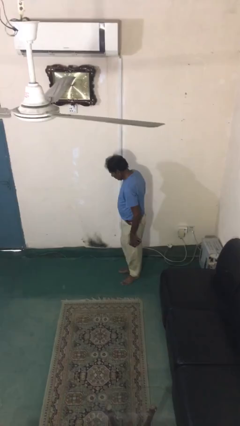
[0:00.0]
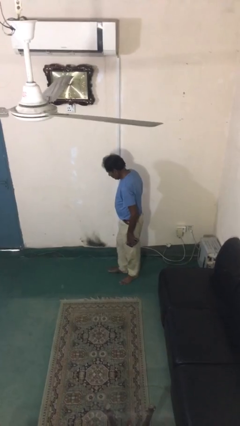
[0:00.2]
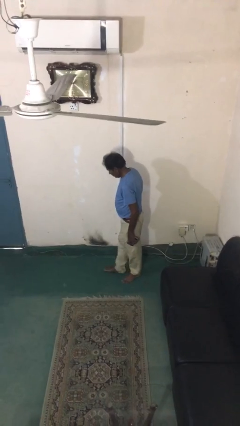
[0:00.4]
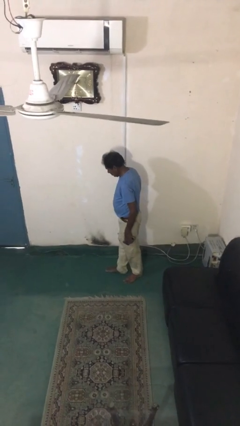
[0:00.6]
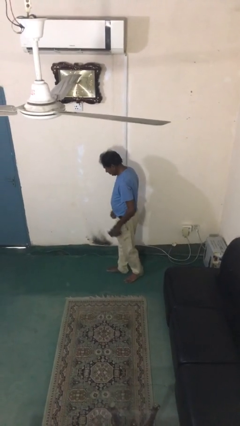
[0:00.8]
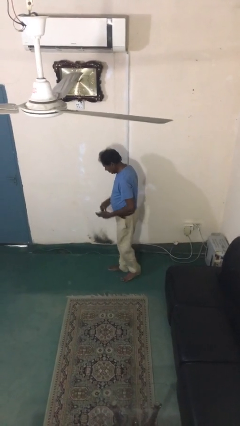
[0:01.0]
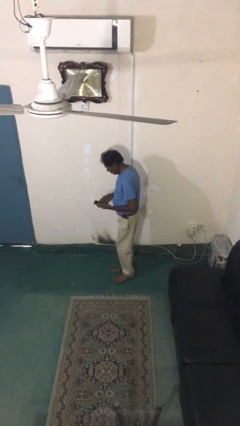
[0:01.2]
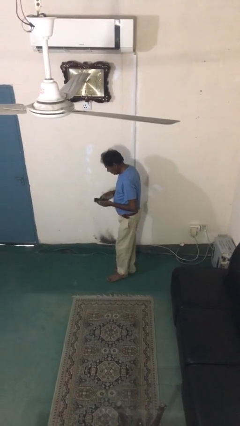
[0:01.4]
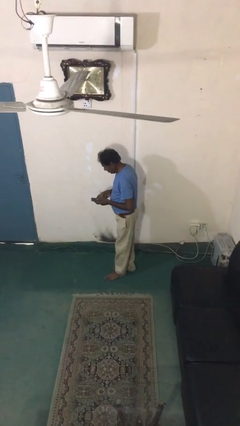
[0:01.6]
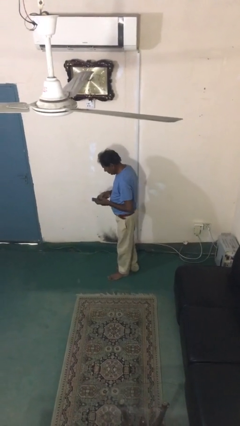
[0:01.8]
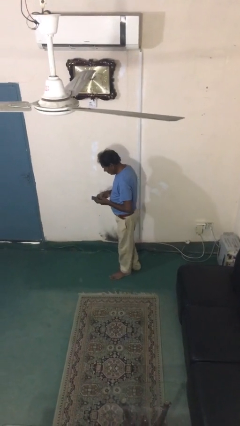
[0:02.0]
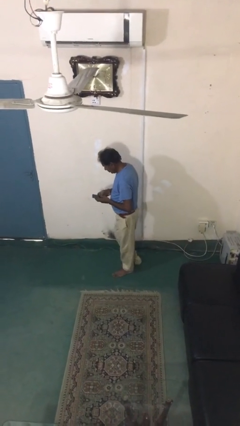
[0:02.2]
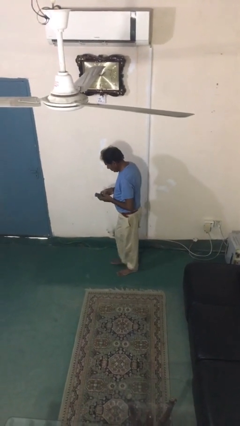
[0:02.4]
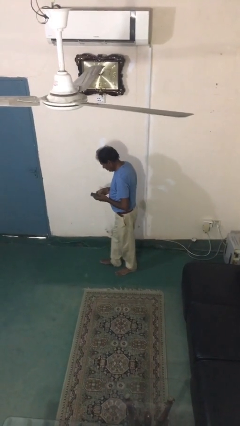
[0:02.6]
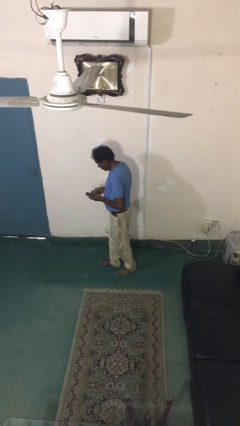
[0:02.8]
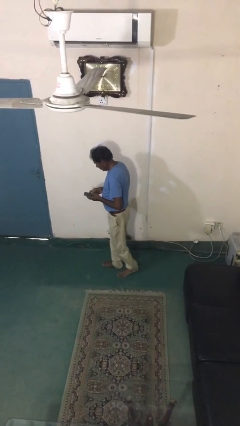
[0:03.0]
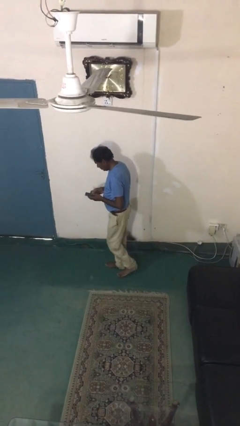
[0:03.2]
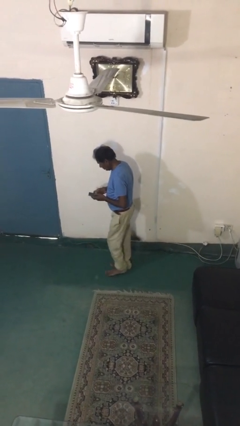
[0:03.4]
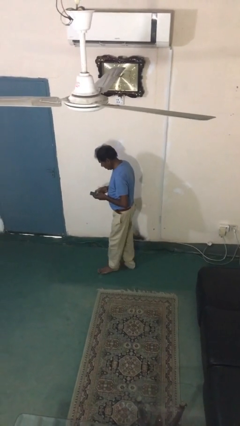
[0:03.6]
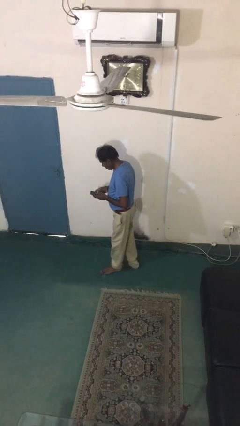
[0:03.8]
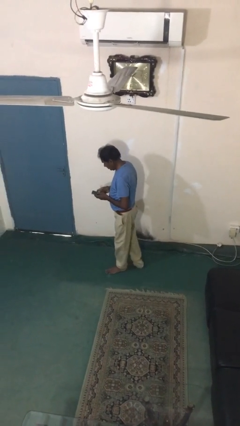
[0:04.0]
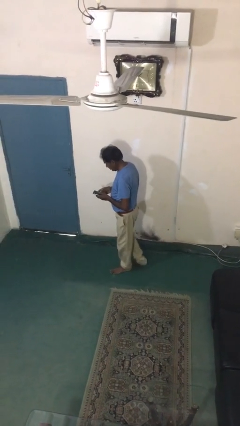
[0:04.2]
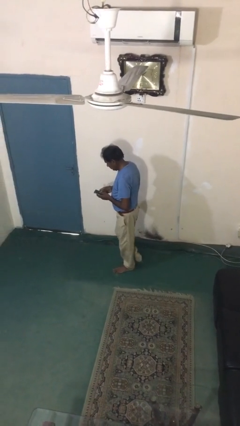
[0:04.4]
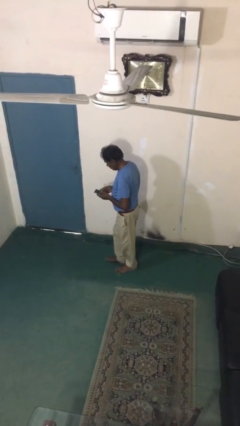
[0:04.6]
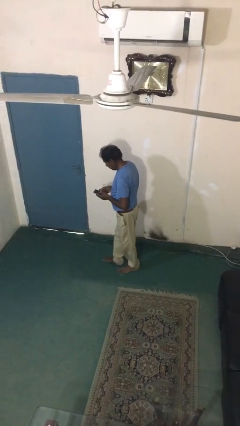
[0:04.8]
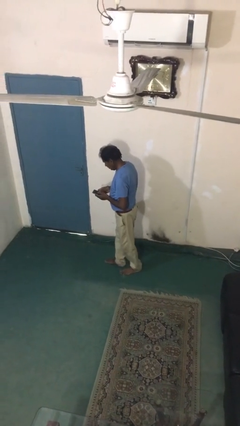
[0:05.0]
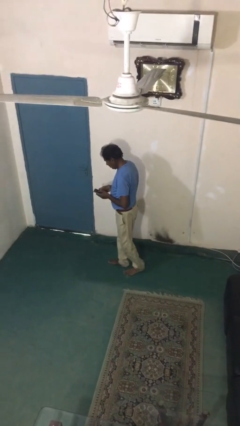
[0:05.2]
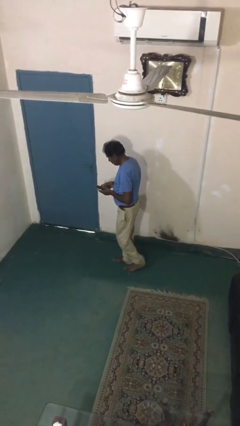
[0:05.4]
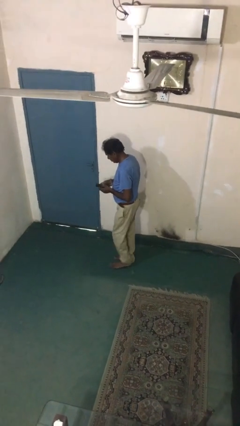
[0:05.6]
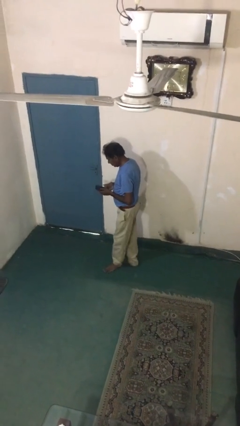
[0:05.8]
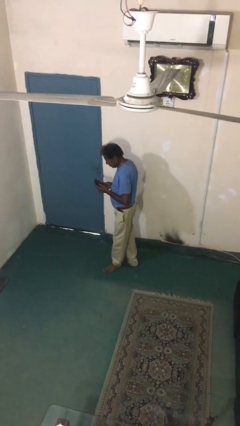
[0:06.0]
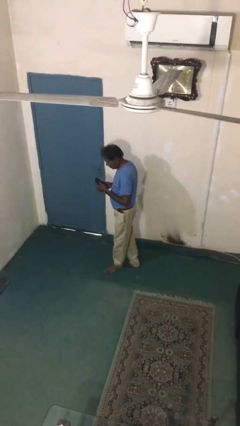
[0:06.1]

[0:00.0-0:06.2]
person texts on phone

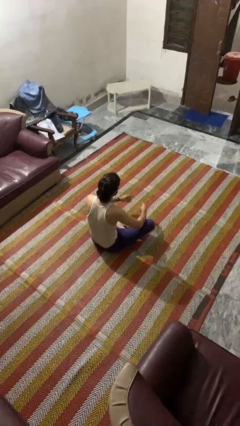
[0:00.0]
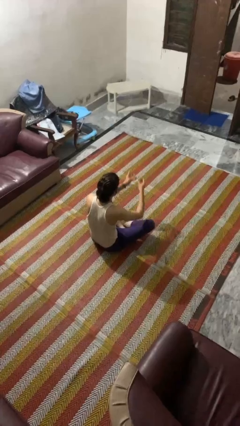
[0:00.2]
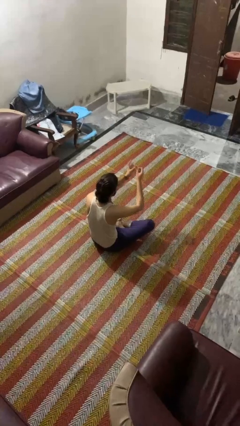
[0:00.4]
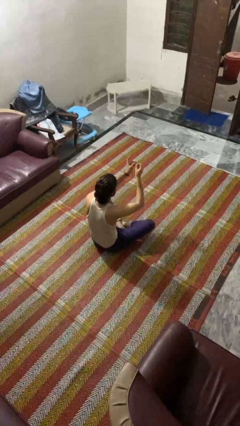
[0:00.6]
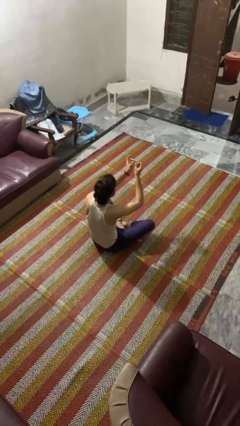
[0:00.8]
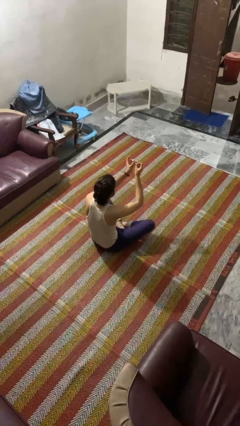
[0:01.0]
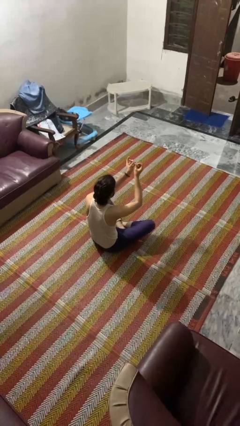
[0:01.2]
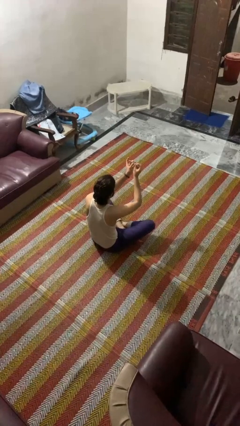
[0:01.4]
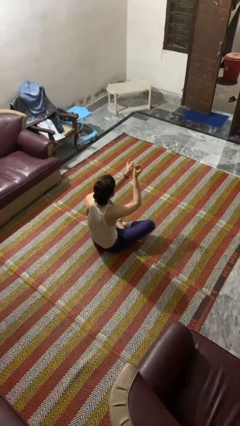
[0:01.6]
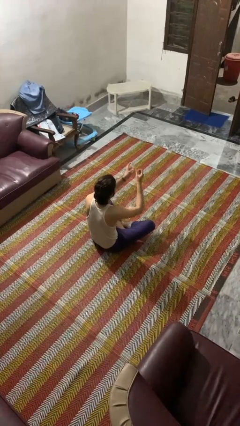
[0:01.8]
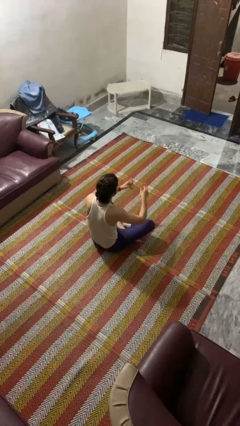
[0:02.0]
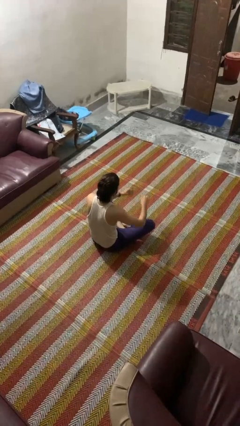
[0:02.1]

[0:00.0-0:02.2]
person clips fingernails

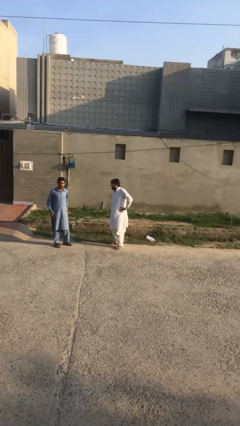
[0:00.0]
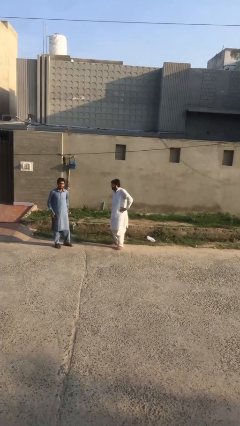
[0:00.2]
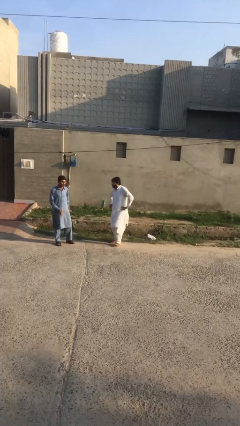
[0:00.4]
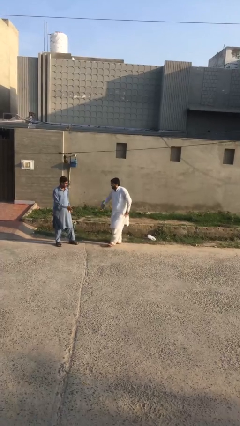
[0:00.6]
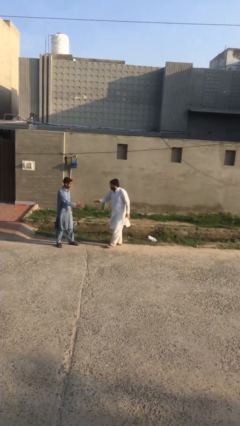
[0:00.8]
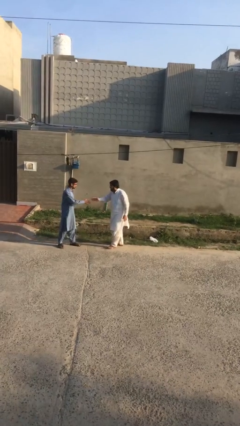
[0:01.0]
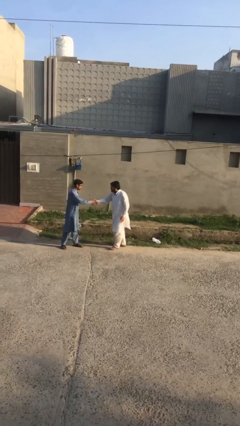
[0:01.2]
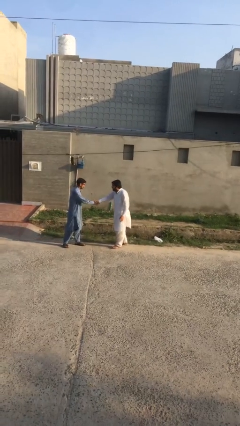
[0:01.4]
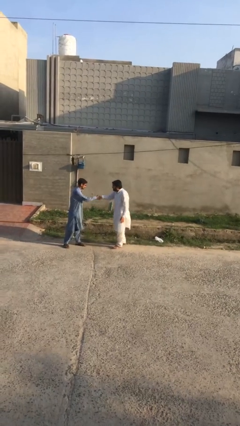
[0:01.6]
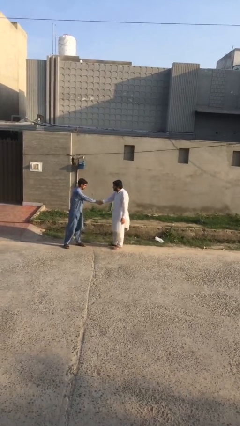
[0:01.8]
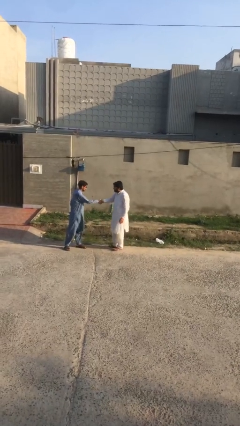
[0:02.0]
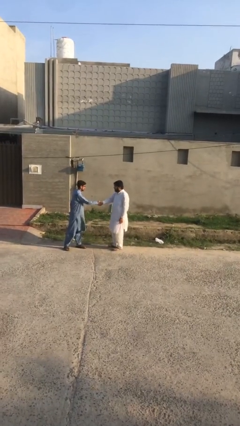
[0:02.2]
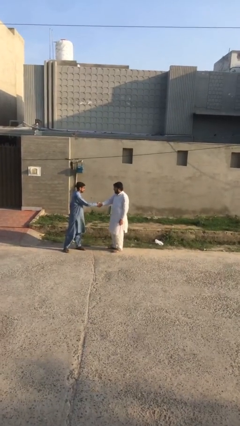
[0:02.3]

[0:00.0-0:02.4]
person shakes hand

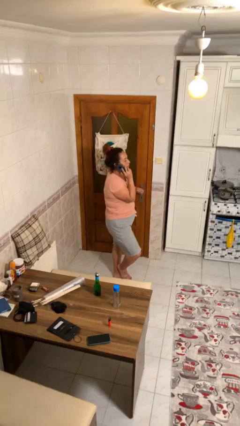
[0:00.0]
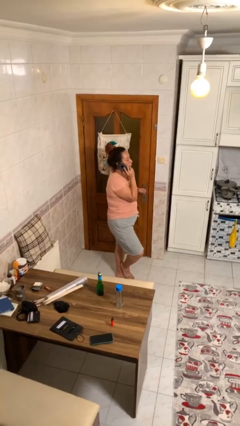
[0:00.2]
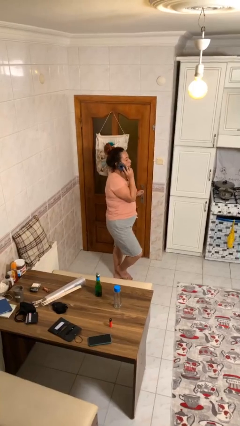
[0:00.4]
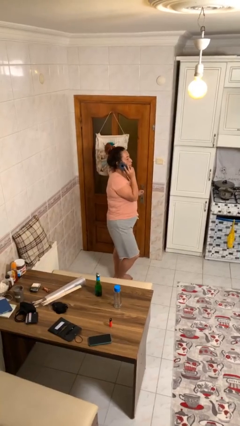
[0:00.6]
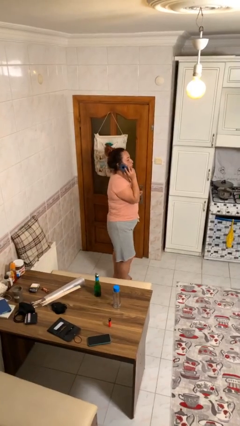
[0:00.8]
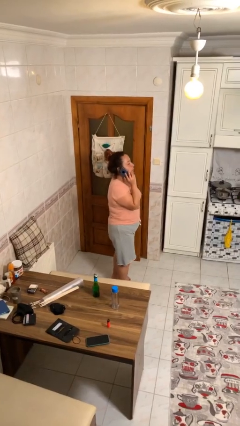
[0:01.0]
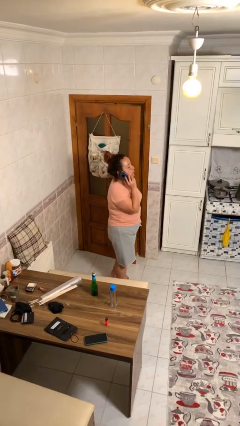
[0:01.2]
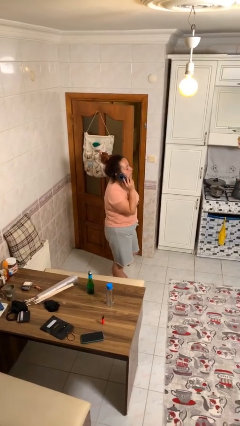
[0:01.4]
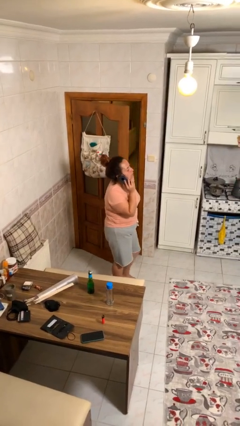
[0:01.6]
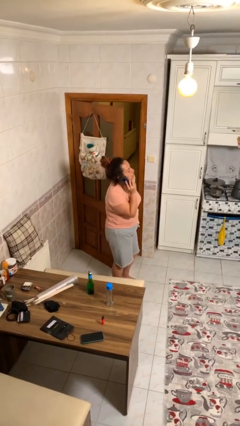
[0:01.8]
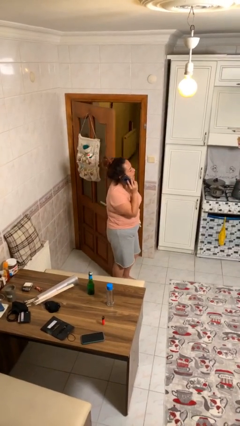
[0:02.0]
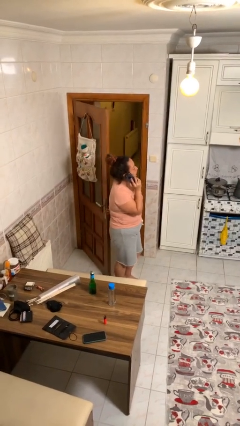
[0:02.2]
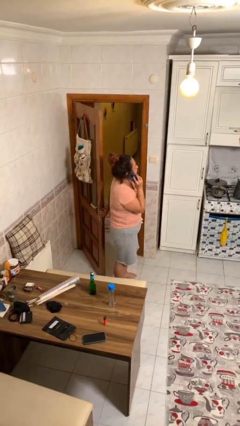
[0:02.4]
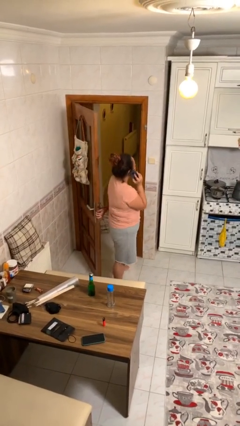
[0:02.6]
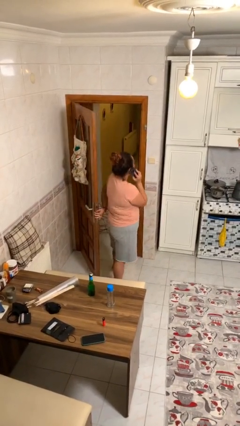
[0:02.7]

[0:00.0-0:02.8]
person opens facility door

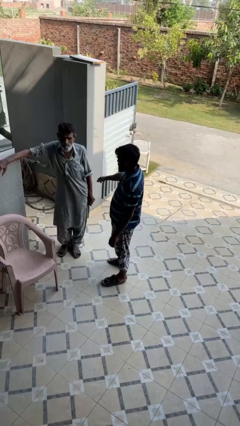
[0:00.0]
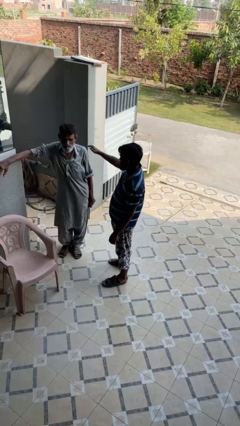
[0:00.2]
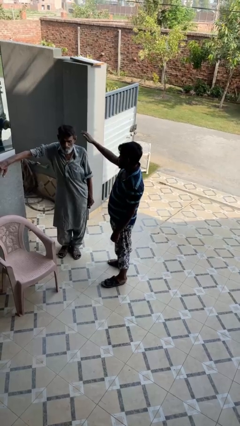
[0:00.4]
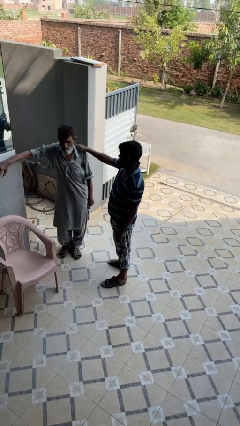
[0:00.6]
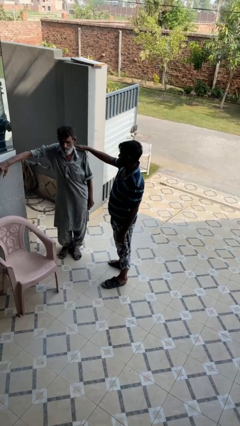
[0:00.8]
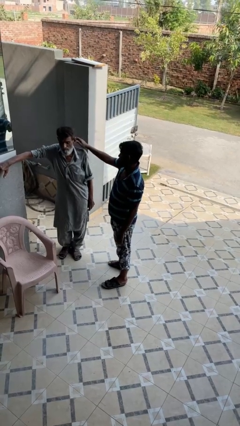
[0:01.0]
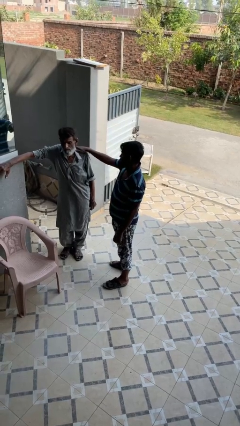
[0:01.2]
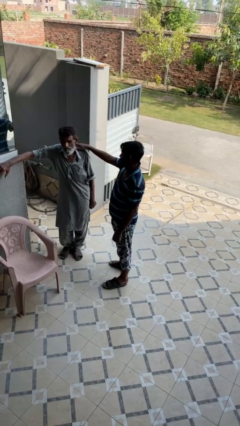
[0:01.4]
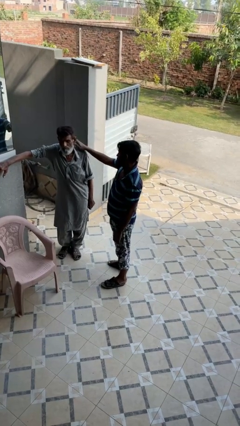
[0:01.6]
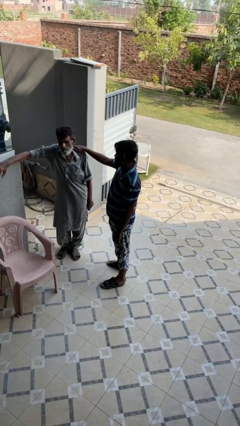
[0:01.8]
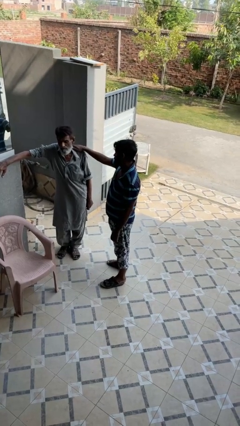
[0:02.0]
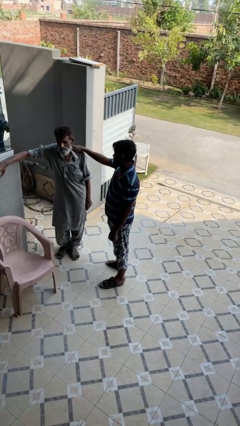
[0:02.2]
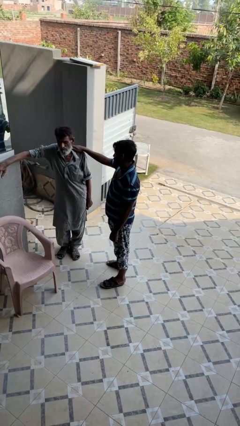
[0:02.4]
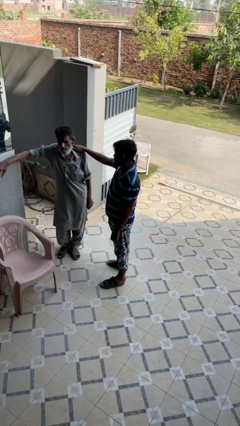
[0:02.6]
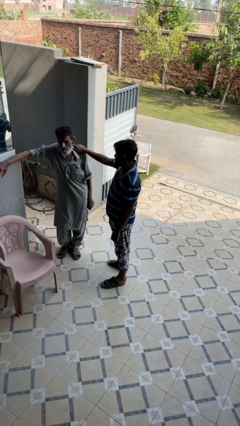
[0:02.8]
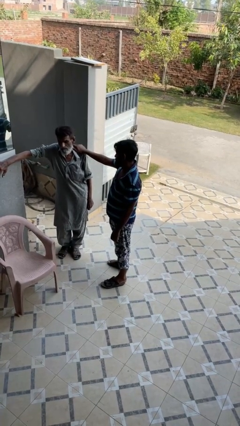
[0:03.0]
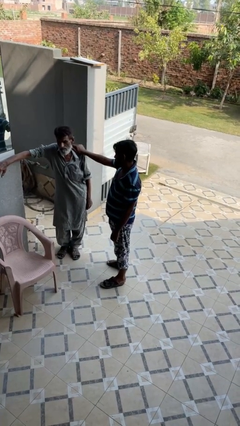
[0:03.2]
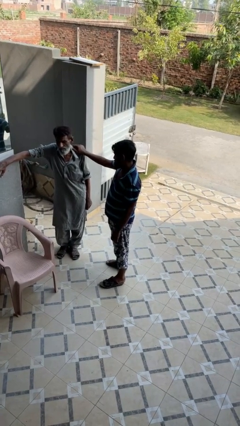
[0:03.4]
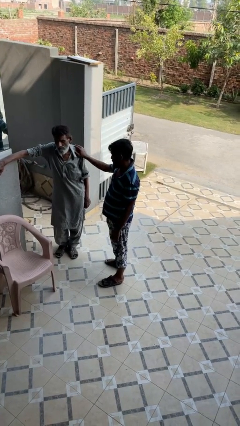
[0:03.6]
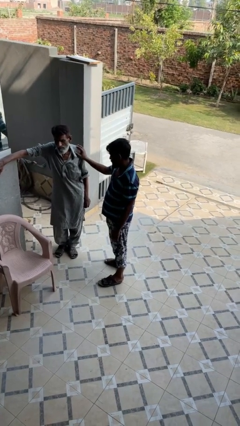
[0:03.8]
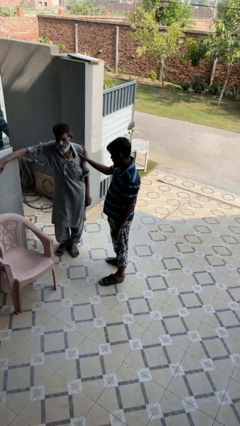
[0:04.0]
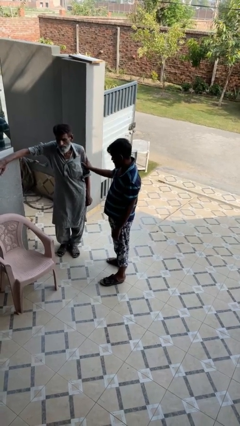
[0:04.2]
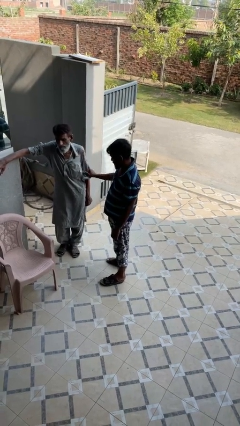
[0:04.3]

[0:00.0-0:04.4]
person pounds shoulders of person
